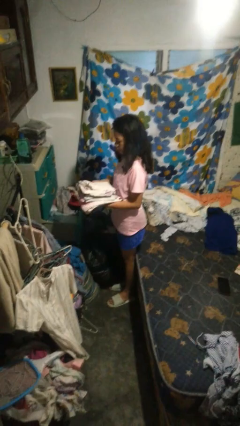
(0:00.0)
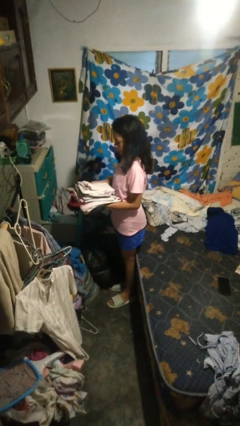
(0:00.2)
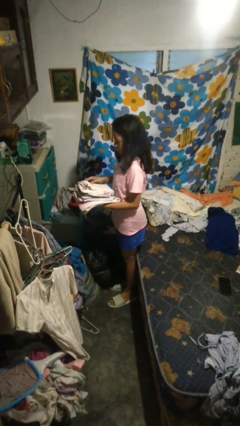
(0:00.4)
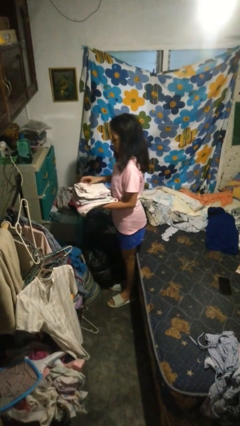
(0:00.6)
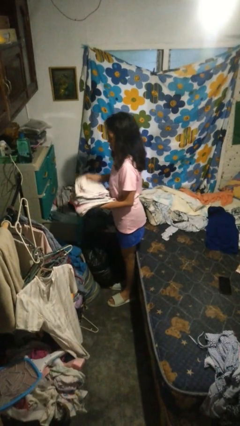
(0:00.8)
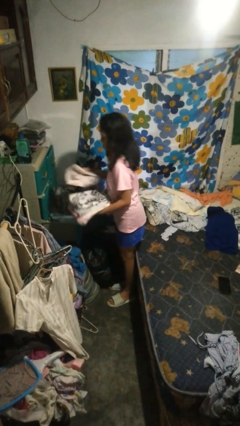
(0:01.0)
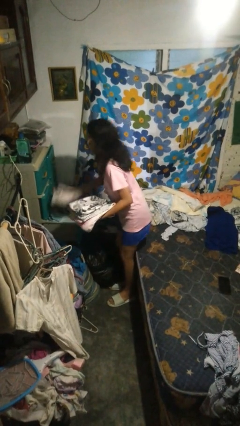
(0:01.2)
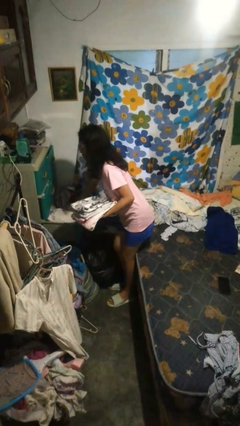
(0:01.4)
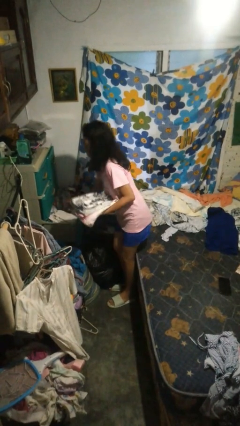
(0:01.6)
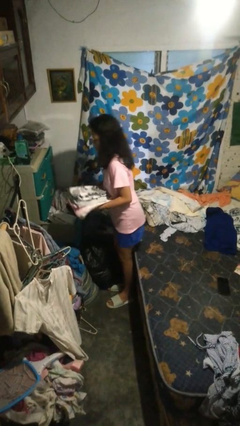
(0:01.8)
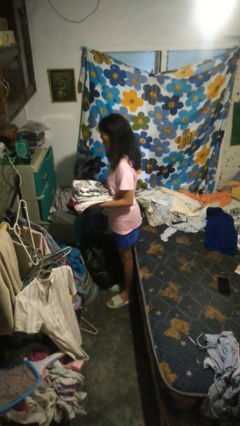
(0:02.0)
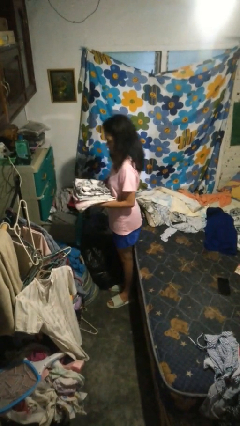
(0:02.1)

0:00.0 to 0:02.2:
person puts clothes into dresser

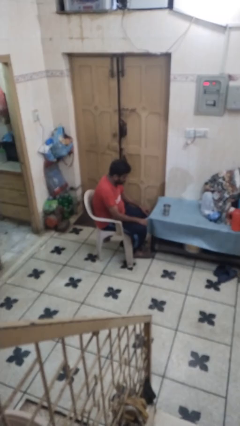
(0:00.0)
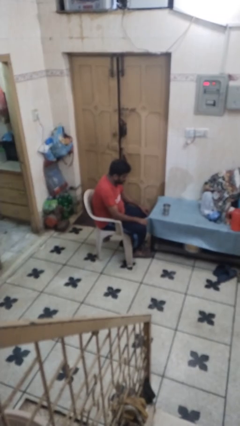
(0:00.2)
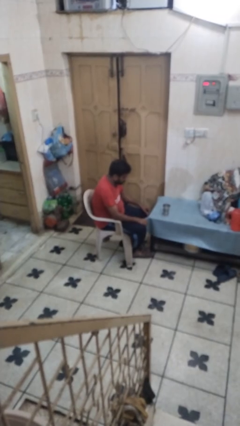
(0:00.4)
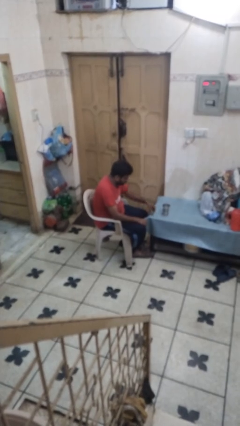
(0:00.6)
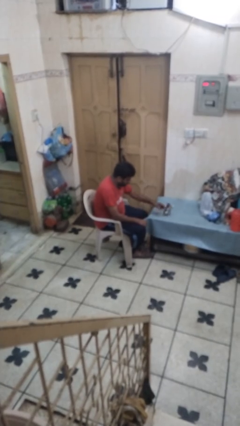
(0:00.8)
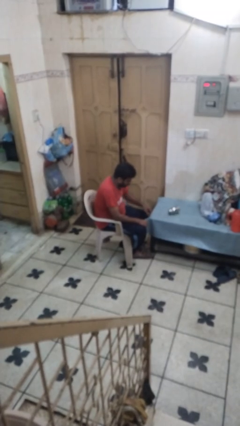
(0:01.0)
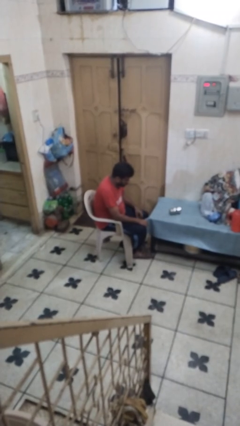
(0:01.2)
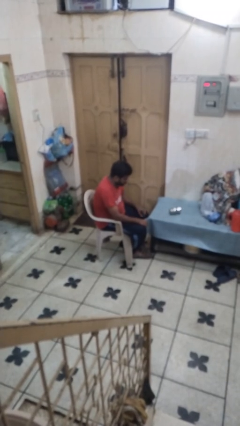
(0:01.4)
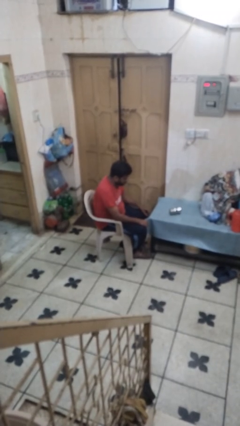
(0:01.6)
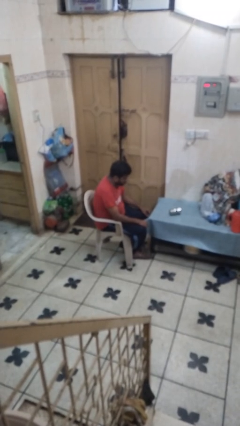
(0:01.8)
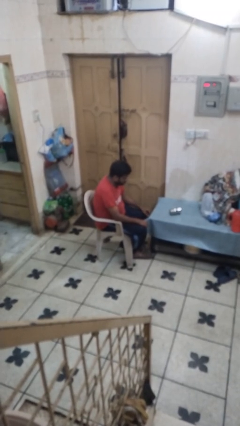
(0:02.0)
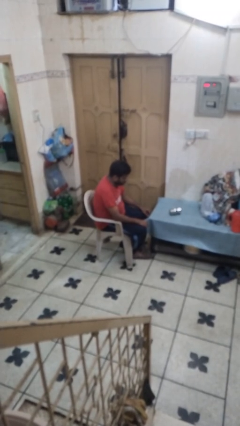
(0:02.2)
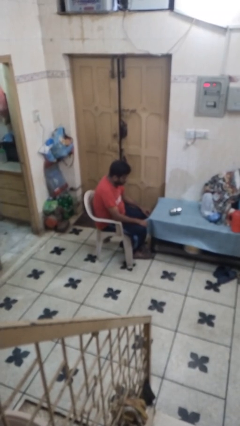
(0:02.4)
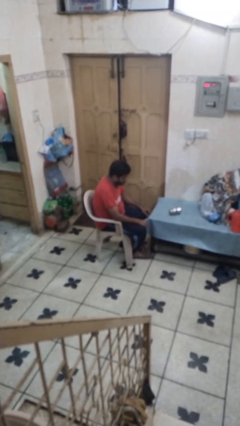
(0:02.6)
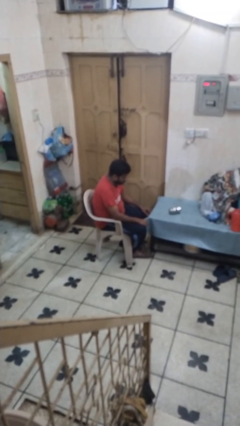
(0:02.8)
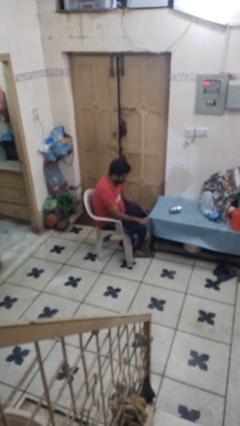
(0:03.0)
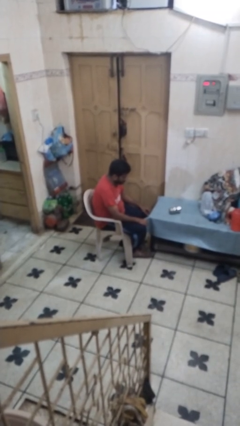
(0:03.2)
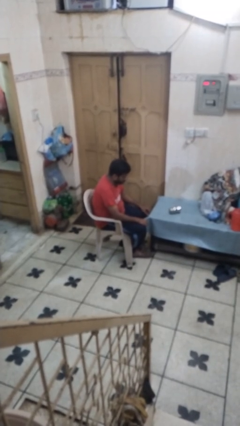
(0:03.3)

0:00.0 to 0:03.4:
person knocks over glass

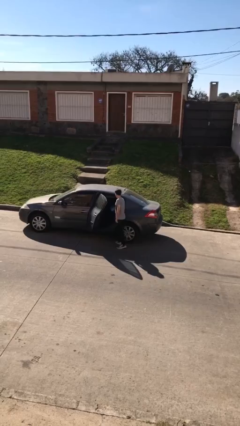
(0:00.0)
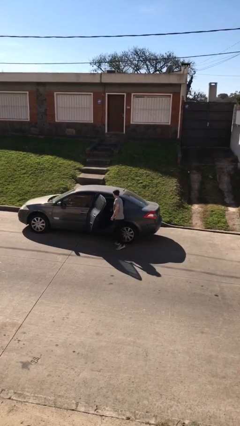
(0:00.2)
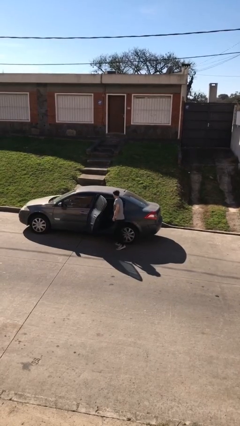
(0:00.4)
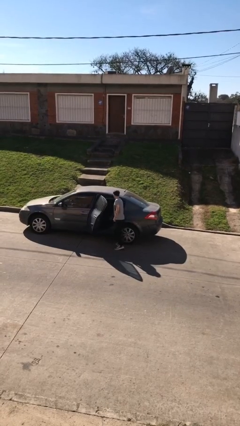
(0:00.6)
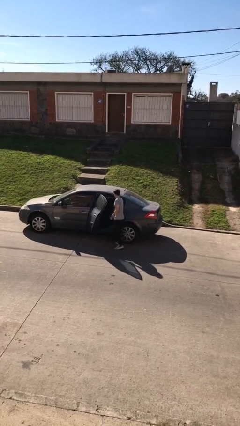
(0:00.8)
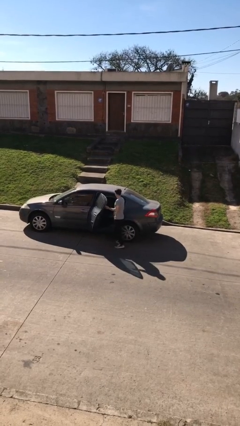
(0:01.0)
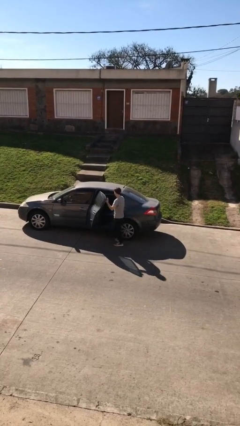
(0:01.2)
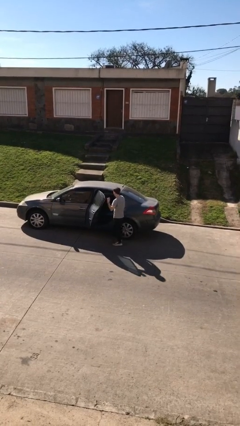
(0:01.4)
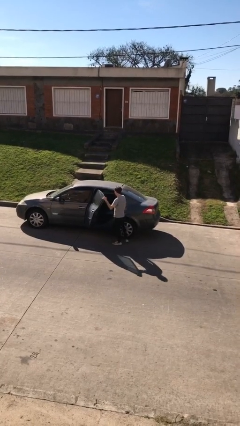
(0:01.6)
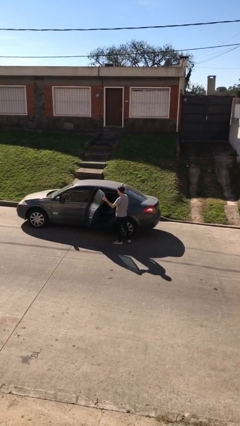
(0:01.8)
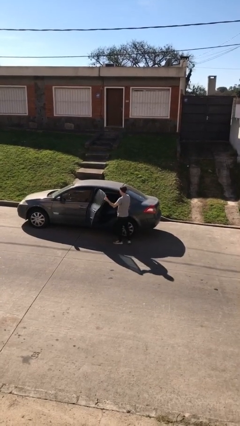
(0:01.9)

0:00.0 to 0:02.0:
person loads car

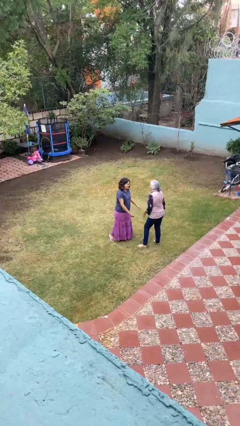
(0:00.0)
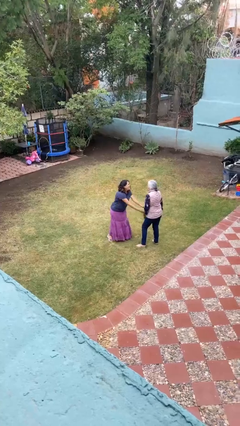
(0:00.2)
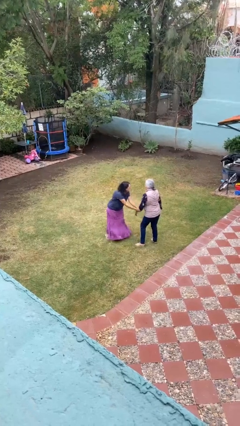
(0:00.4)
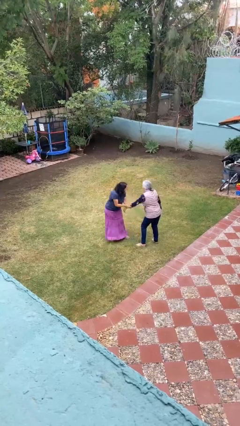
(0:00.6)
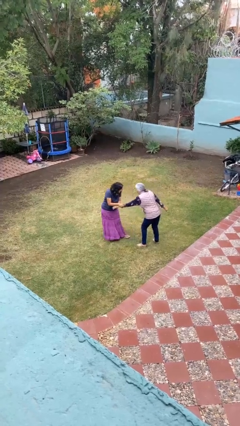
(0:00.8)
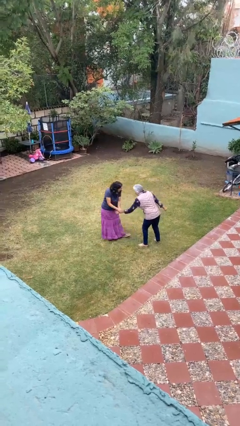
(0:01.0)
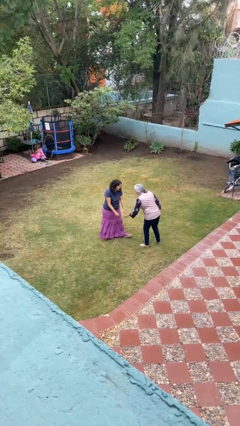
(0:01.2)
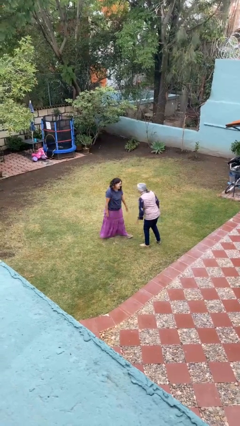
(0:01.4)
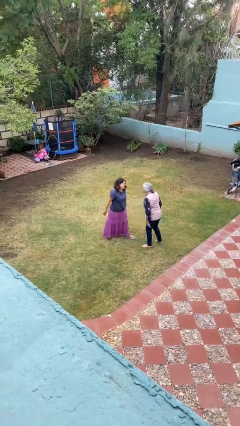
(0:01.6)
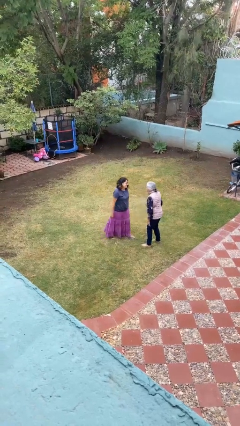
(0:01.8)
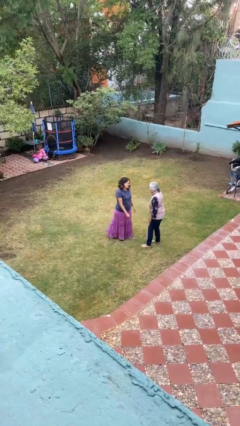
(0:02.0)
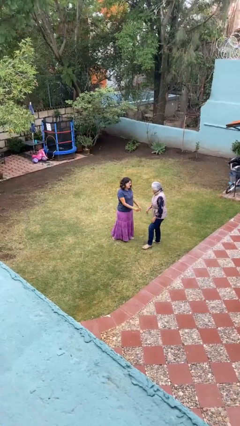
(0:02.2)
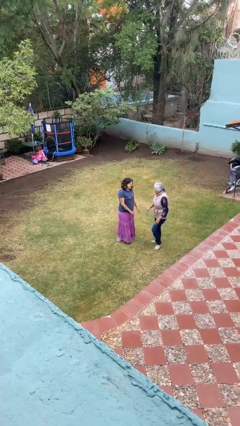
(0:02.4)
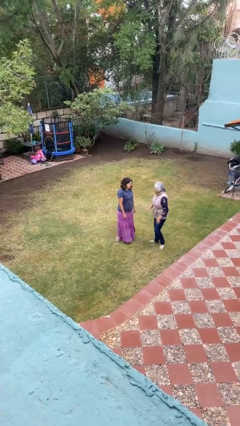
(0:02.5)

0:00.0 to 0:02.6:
person grabs person by forearm

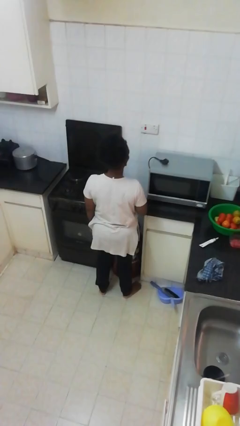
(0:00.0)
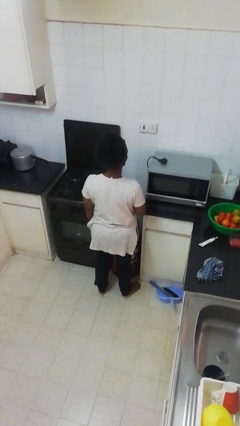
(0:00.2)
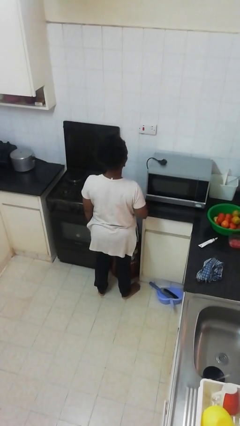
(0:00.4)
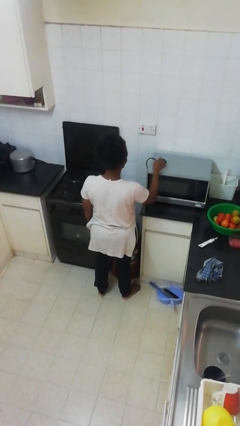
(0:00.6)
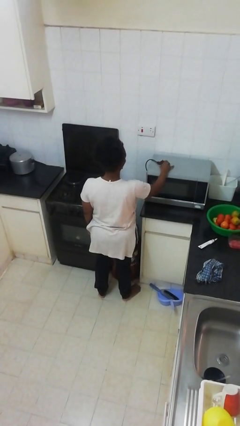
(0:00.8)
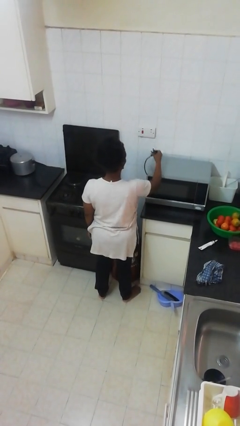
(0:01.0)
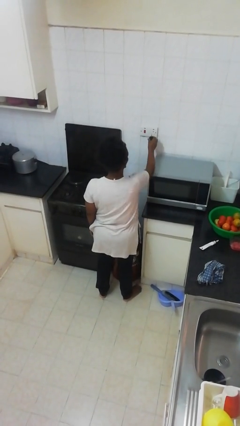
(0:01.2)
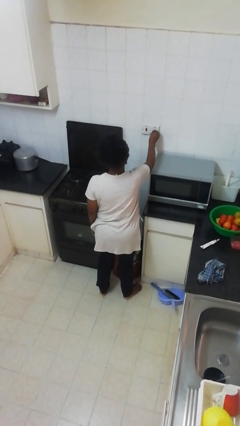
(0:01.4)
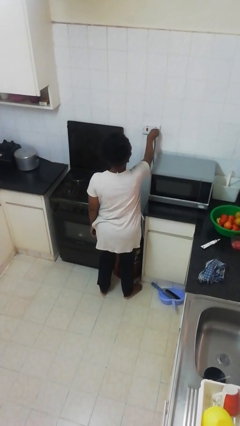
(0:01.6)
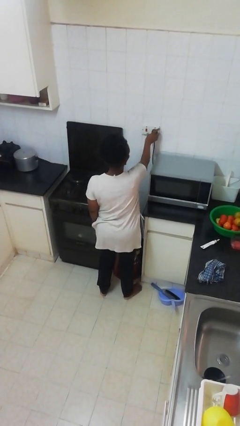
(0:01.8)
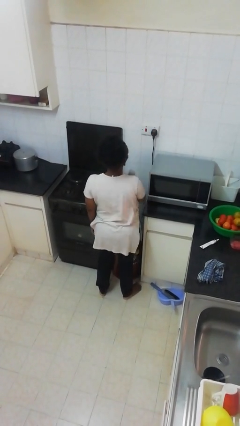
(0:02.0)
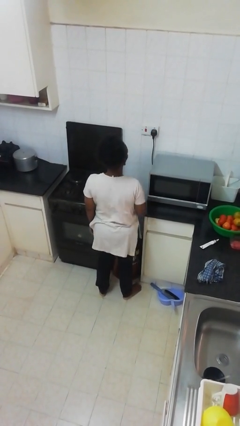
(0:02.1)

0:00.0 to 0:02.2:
person plugs into electrical socket

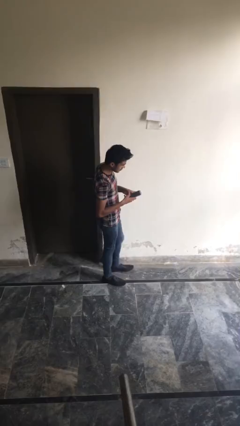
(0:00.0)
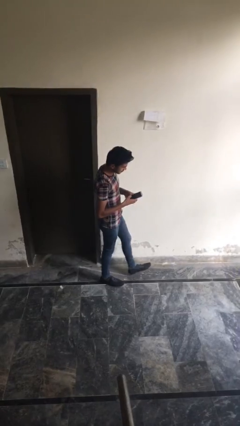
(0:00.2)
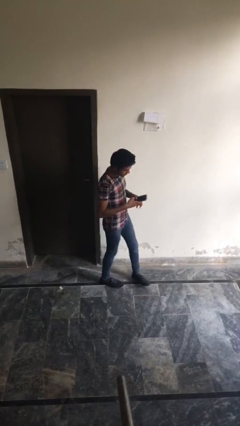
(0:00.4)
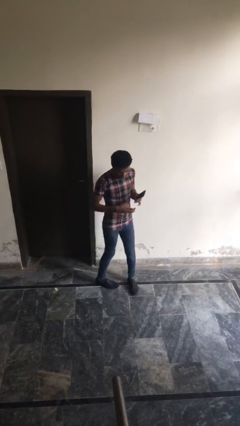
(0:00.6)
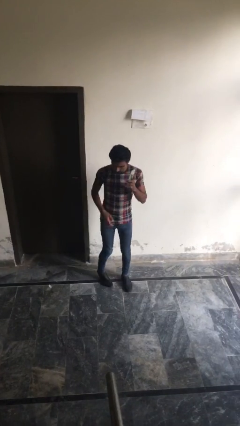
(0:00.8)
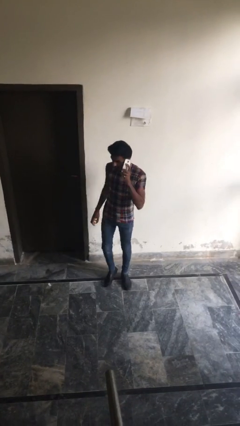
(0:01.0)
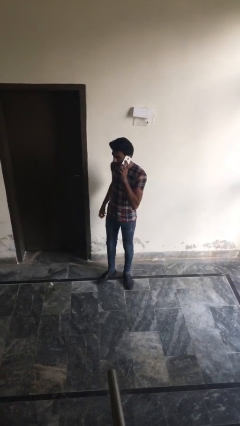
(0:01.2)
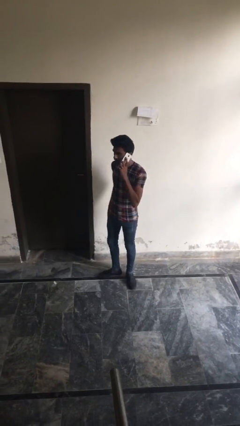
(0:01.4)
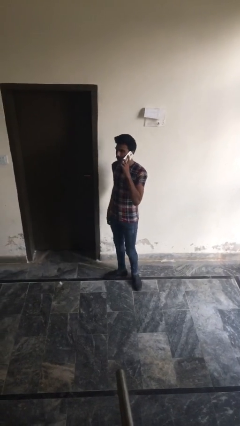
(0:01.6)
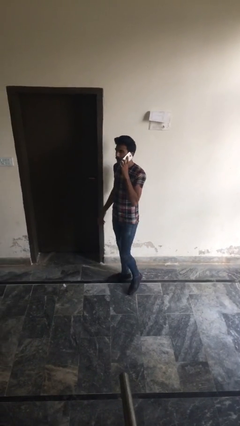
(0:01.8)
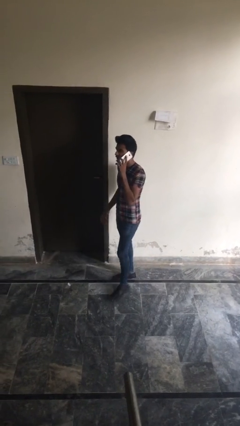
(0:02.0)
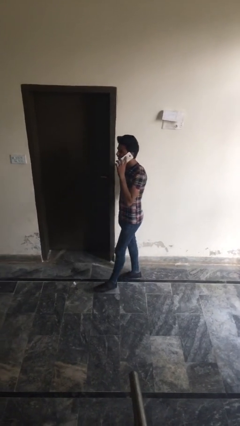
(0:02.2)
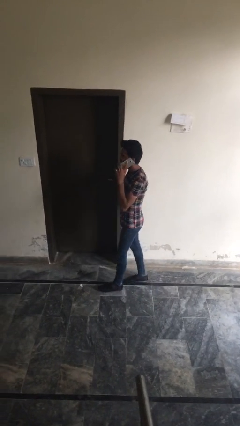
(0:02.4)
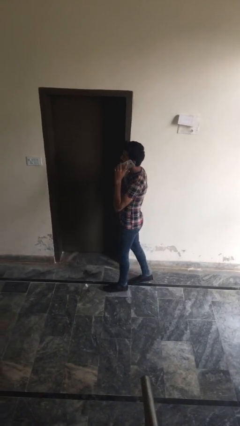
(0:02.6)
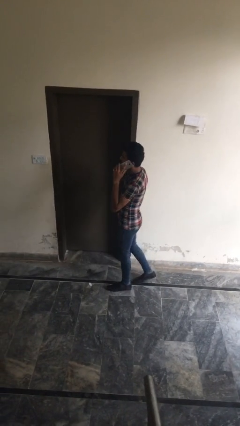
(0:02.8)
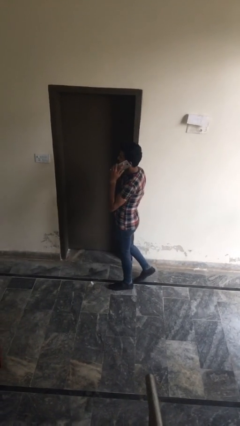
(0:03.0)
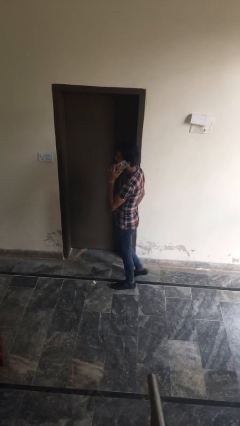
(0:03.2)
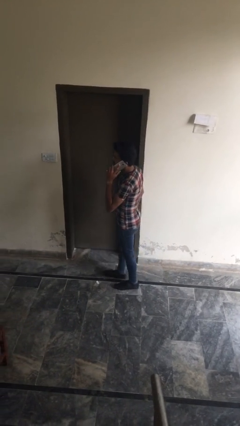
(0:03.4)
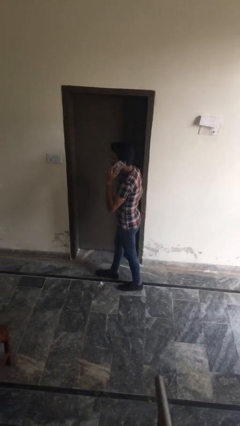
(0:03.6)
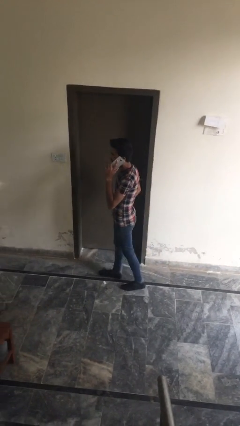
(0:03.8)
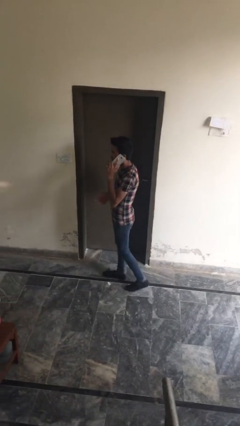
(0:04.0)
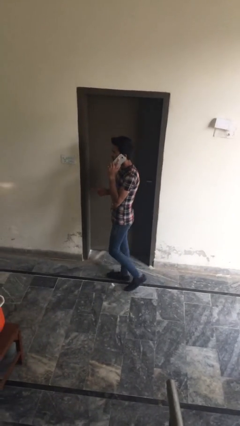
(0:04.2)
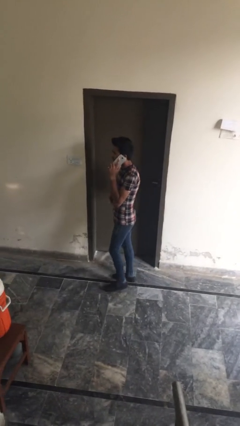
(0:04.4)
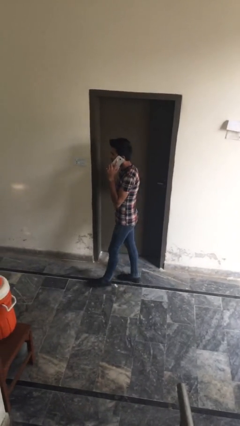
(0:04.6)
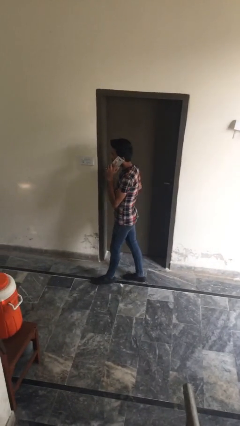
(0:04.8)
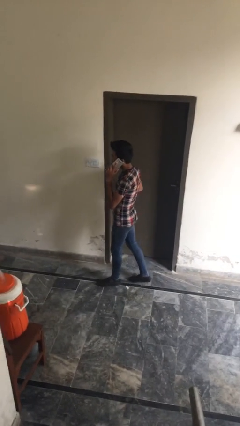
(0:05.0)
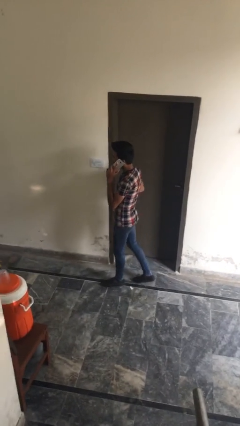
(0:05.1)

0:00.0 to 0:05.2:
person talks on phone

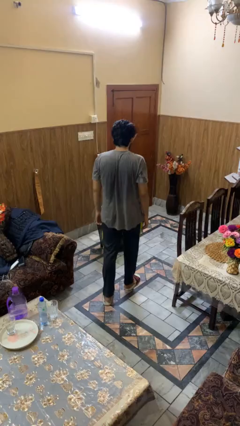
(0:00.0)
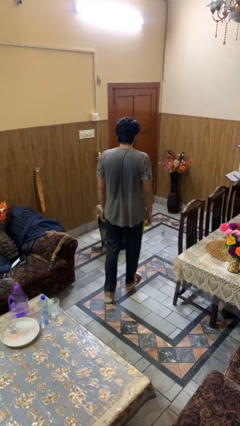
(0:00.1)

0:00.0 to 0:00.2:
person lies down on floor
